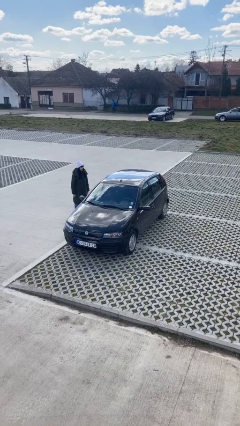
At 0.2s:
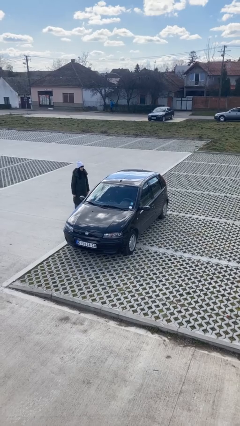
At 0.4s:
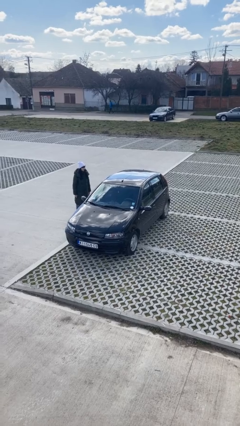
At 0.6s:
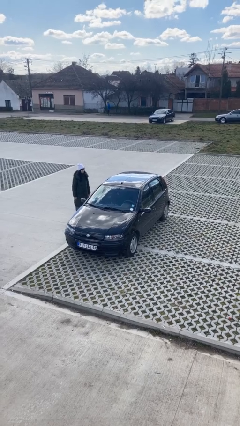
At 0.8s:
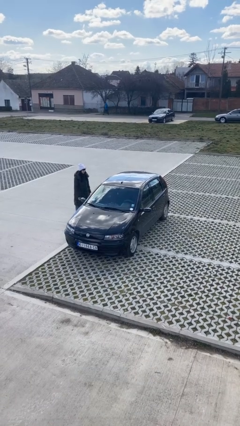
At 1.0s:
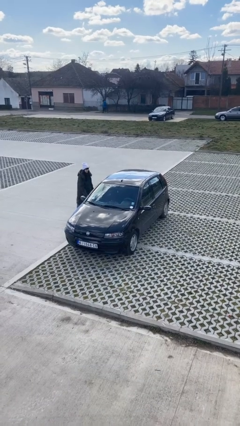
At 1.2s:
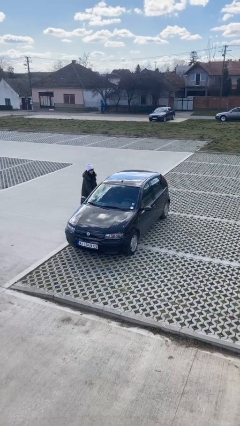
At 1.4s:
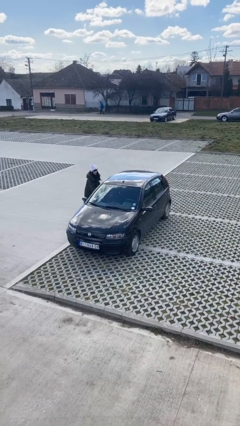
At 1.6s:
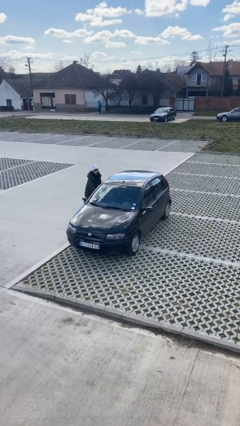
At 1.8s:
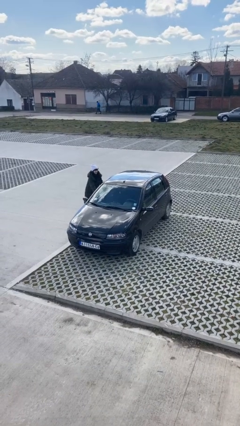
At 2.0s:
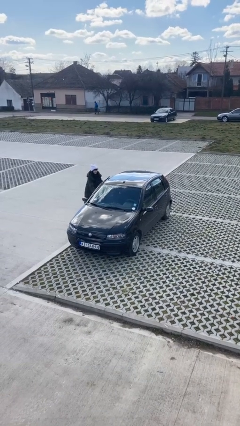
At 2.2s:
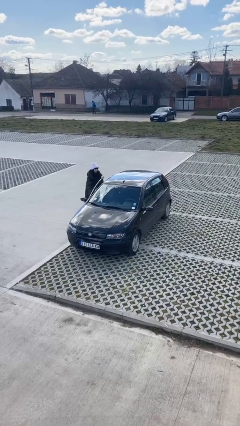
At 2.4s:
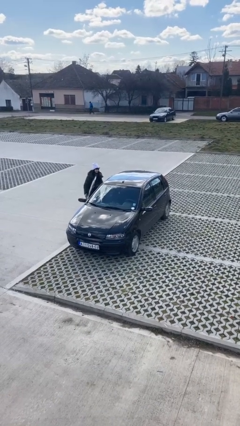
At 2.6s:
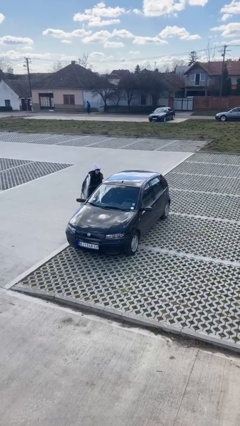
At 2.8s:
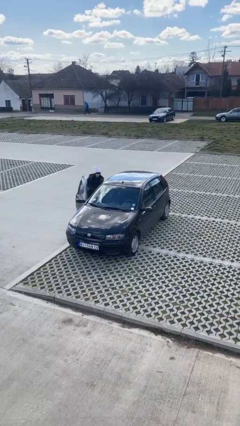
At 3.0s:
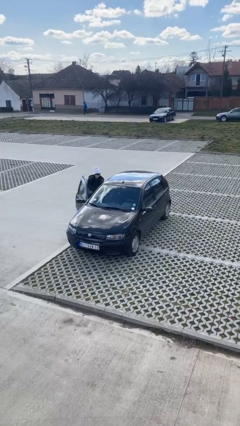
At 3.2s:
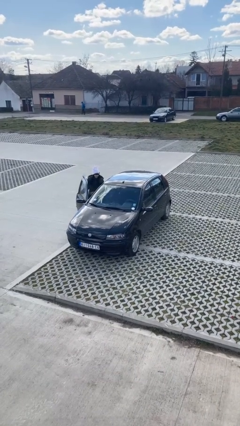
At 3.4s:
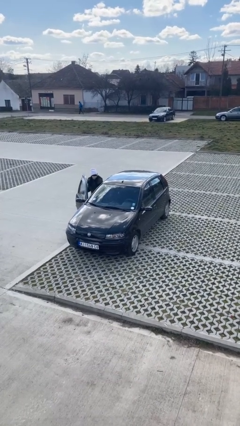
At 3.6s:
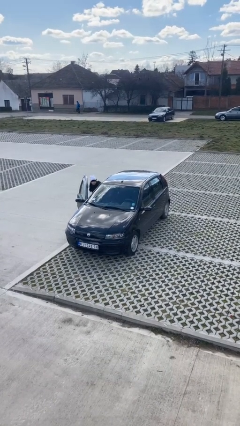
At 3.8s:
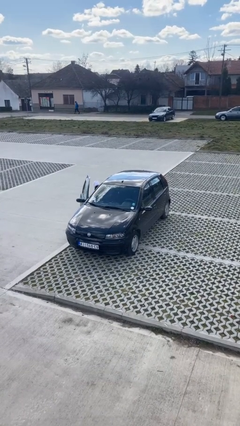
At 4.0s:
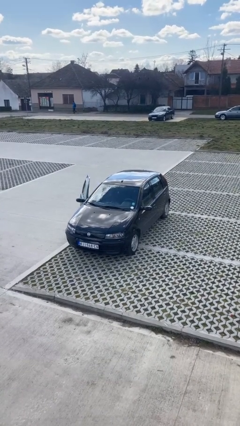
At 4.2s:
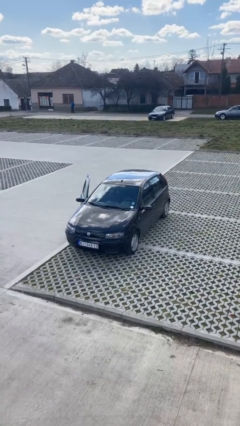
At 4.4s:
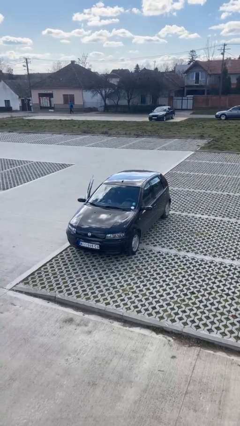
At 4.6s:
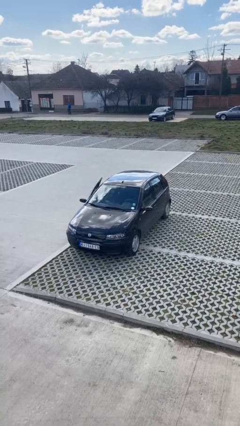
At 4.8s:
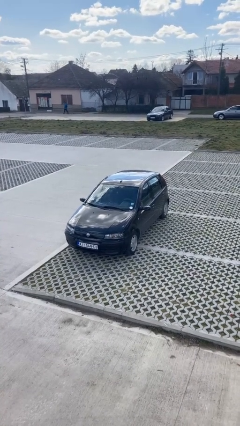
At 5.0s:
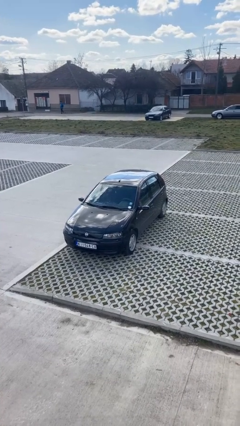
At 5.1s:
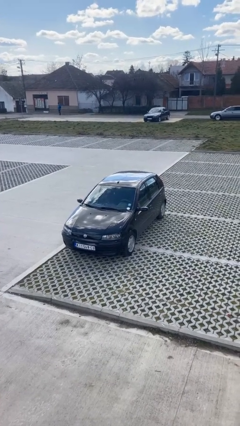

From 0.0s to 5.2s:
car picks up person

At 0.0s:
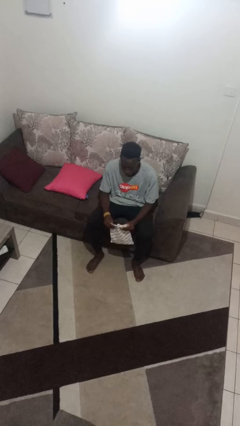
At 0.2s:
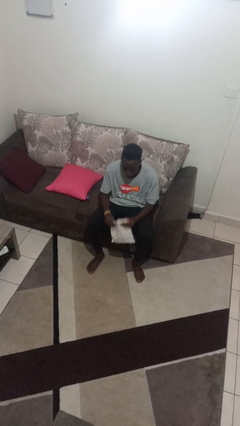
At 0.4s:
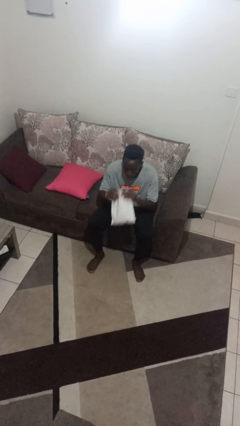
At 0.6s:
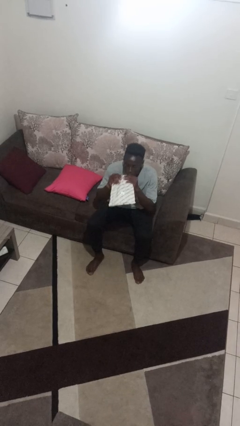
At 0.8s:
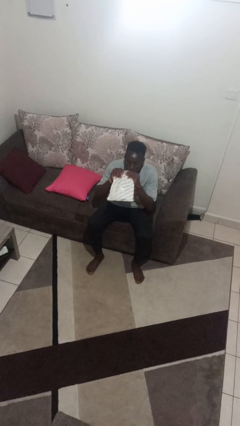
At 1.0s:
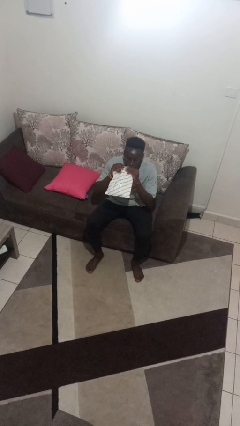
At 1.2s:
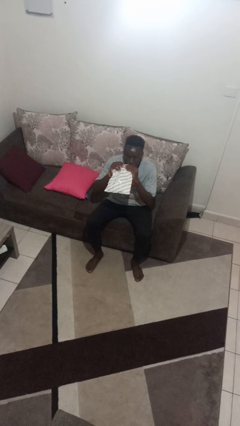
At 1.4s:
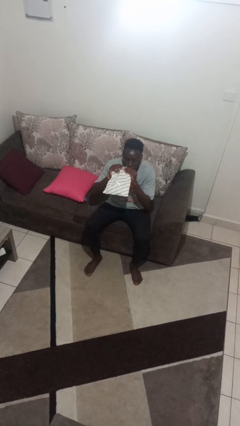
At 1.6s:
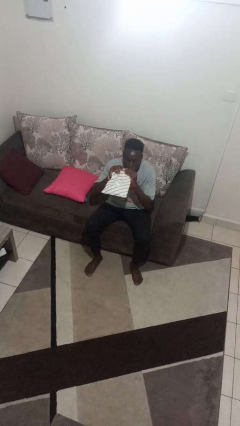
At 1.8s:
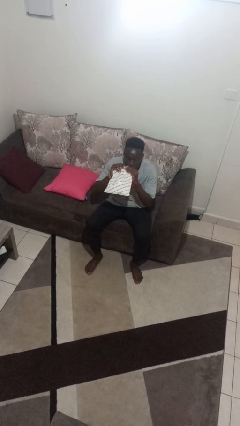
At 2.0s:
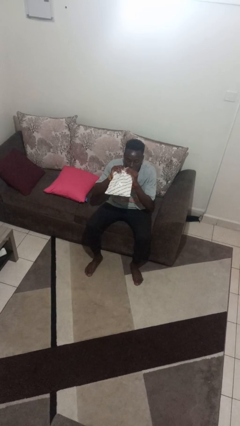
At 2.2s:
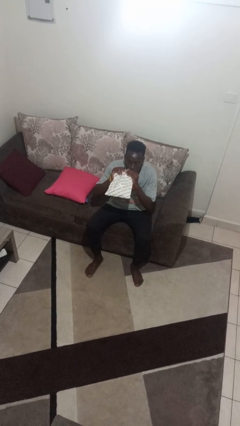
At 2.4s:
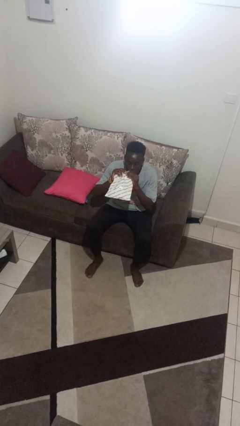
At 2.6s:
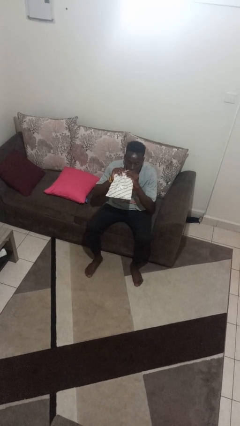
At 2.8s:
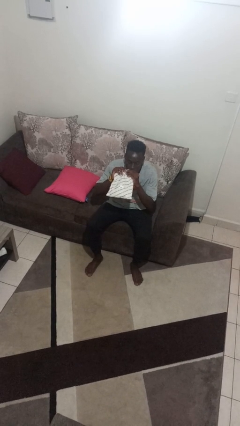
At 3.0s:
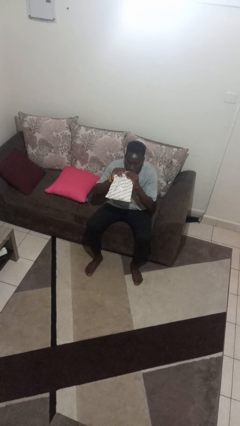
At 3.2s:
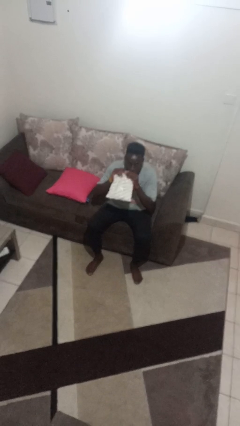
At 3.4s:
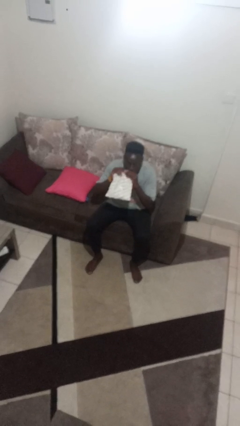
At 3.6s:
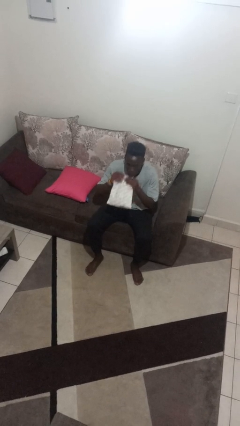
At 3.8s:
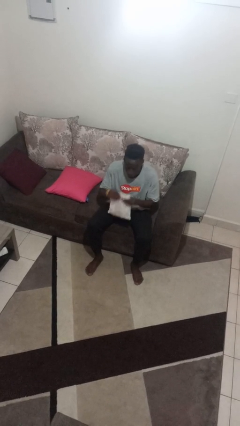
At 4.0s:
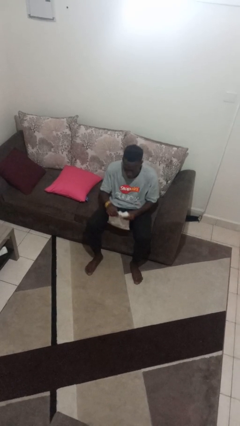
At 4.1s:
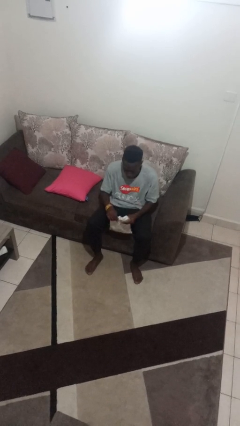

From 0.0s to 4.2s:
person eats snack from bag

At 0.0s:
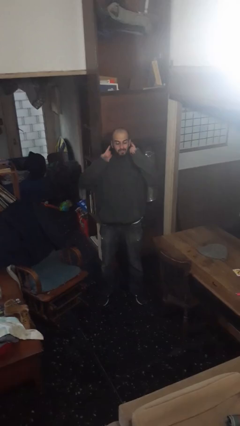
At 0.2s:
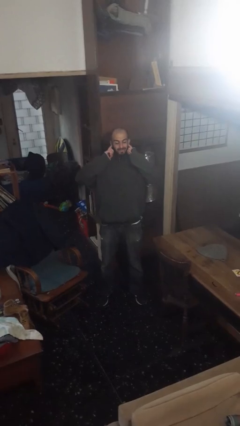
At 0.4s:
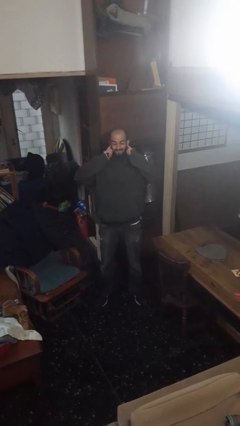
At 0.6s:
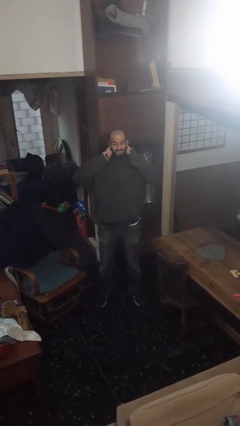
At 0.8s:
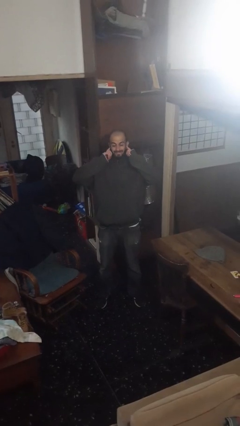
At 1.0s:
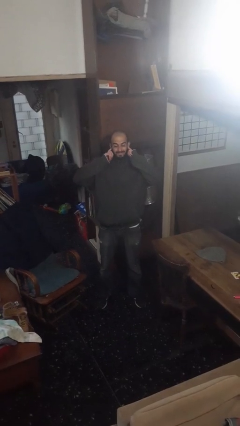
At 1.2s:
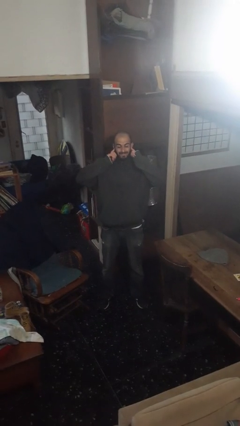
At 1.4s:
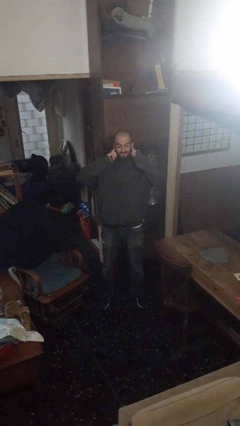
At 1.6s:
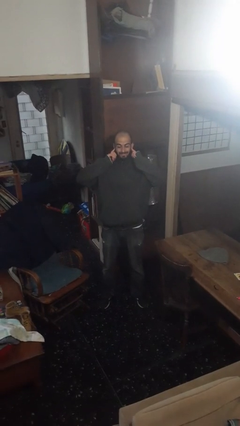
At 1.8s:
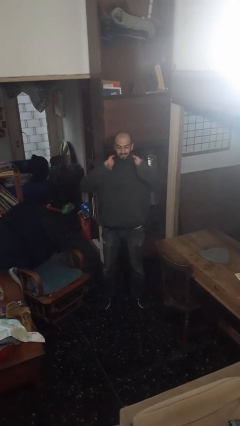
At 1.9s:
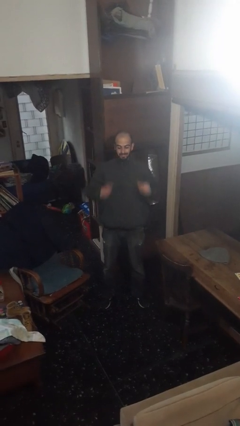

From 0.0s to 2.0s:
person puts fingers in ear

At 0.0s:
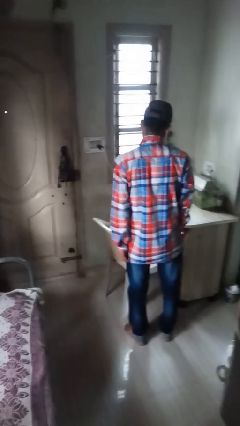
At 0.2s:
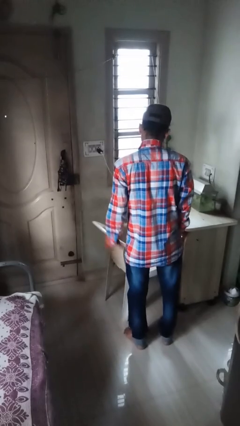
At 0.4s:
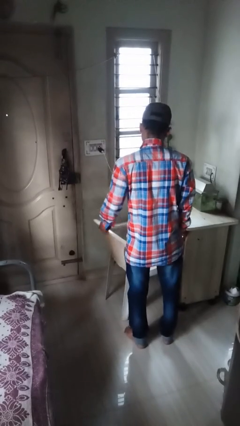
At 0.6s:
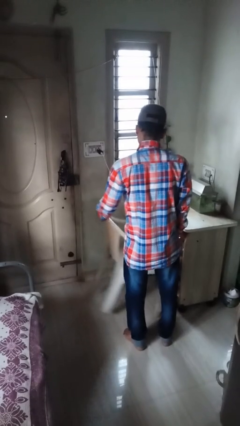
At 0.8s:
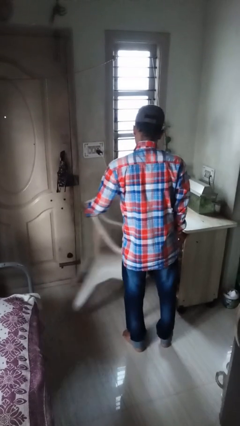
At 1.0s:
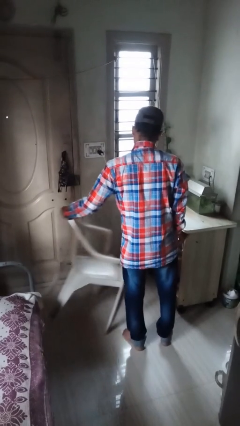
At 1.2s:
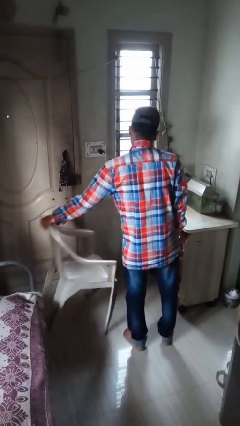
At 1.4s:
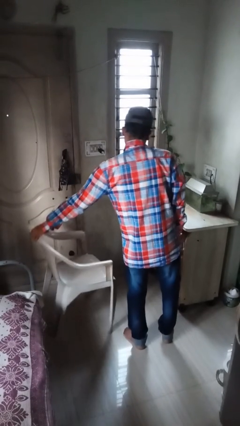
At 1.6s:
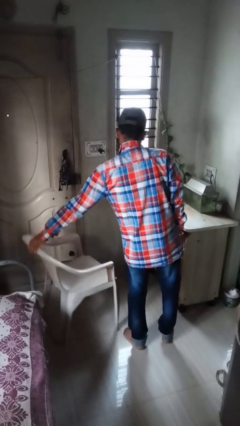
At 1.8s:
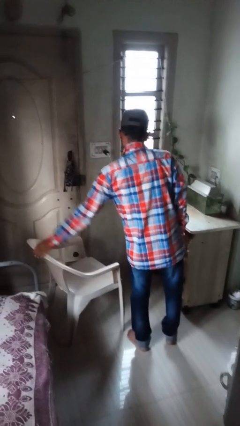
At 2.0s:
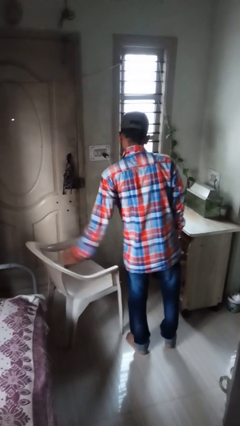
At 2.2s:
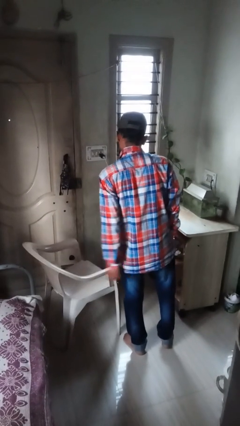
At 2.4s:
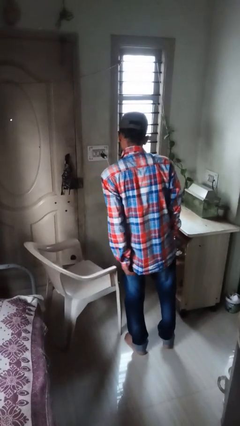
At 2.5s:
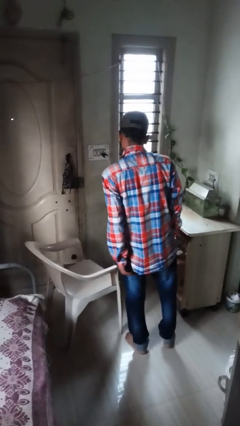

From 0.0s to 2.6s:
person pulls out chair

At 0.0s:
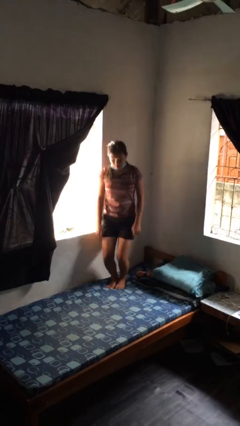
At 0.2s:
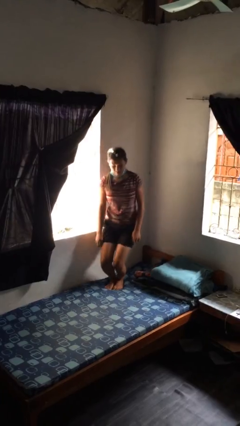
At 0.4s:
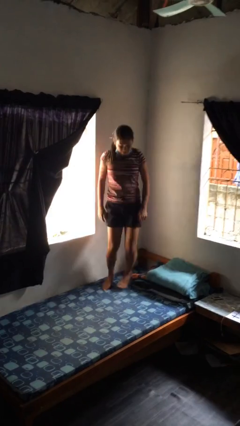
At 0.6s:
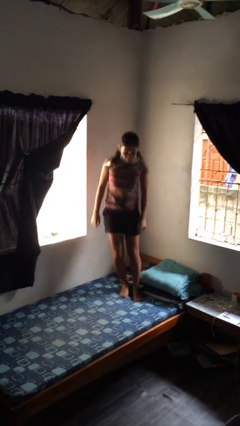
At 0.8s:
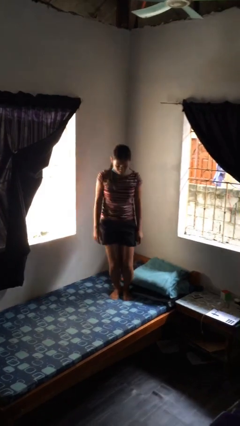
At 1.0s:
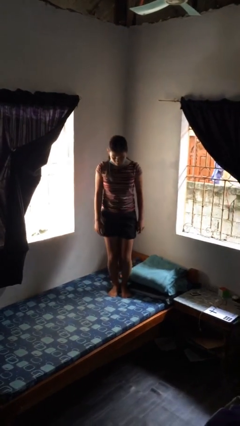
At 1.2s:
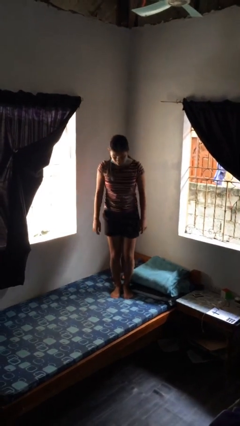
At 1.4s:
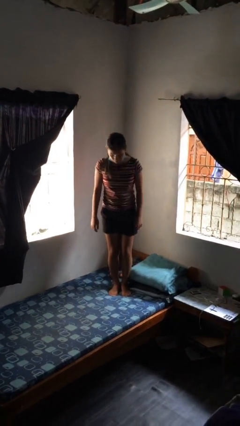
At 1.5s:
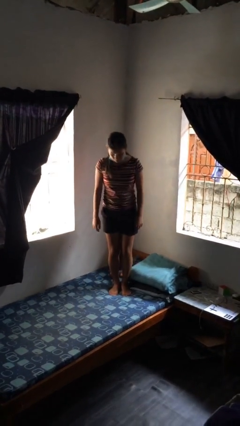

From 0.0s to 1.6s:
person jumps on bed

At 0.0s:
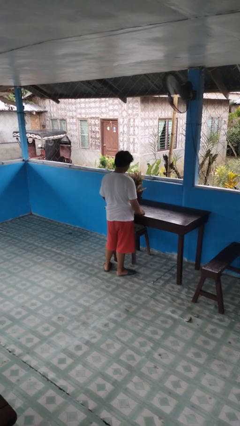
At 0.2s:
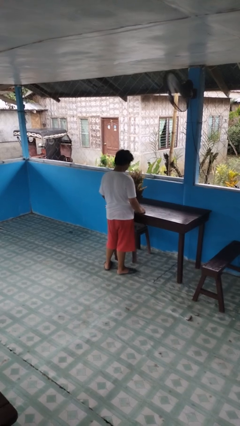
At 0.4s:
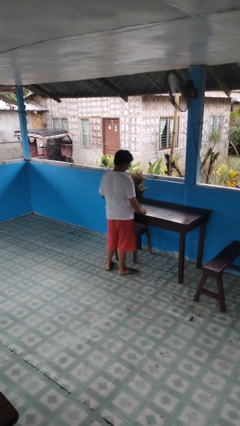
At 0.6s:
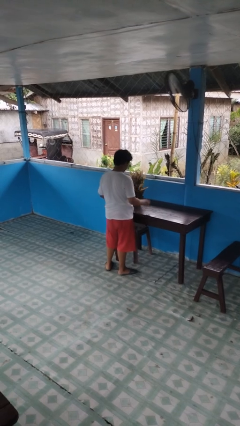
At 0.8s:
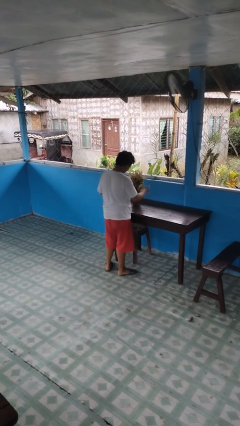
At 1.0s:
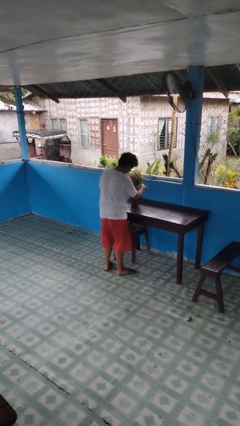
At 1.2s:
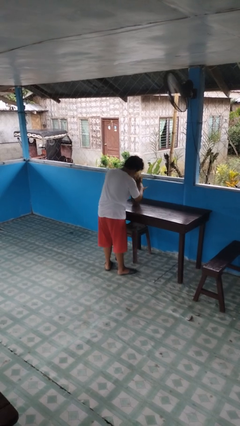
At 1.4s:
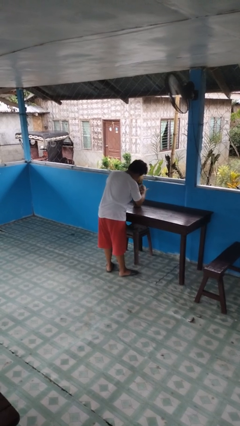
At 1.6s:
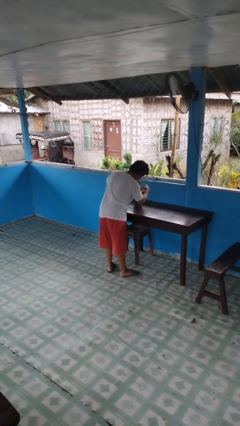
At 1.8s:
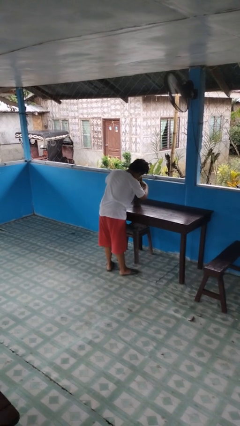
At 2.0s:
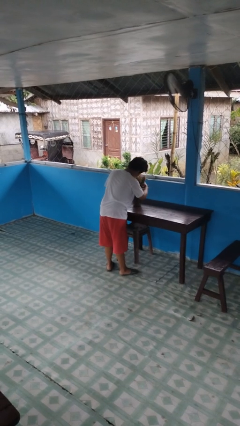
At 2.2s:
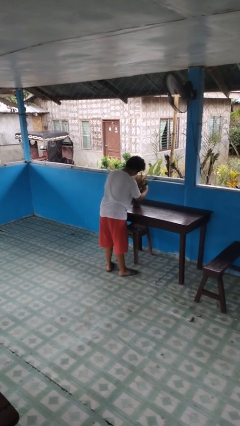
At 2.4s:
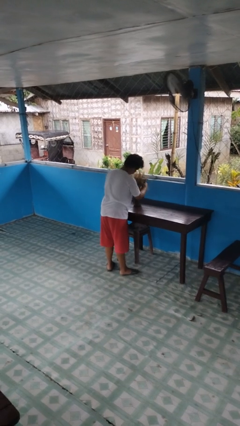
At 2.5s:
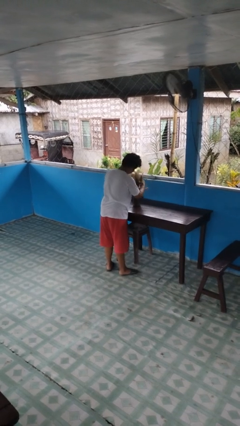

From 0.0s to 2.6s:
person arranges flowers in vase
